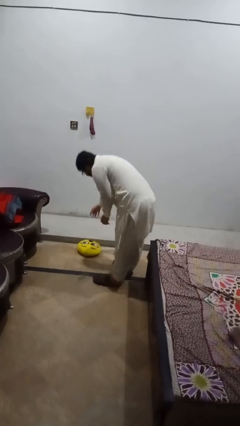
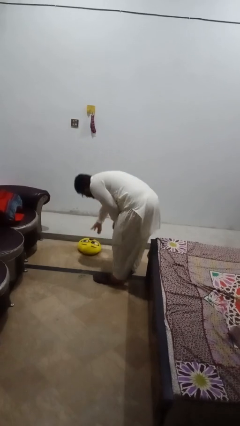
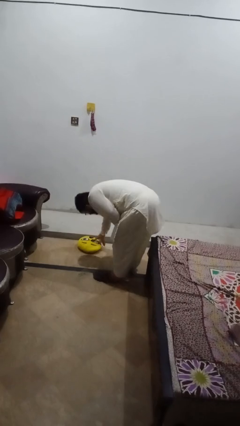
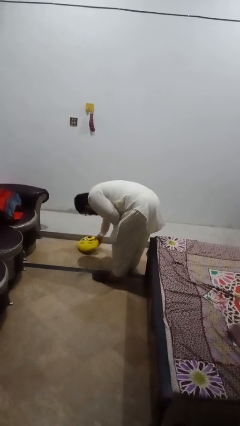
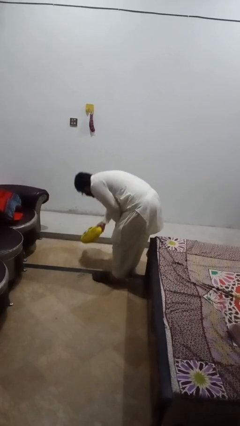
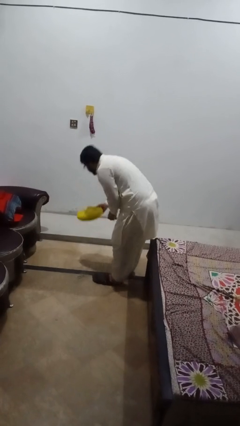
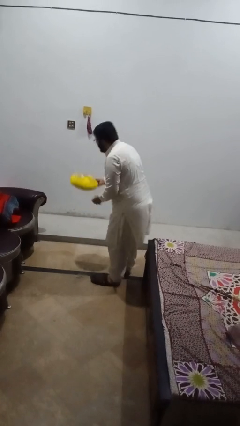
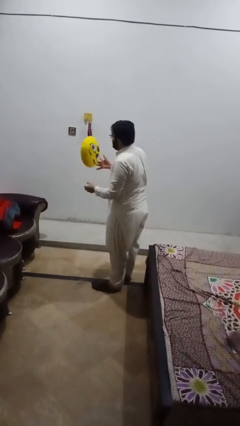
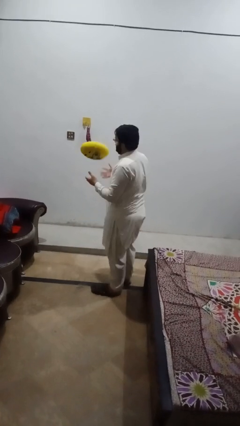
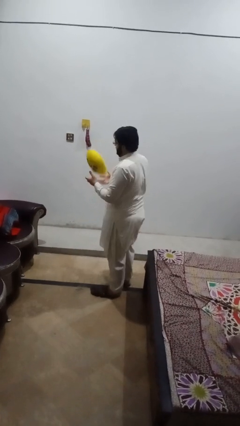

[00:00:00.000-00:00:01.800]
person picks up object from floor

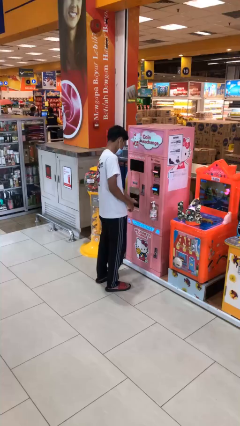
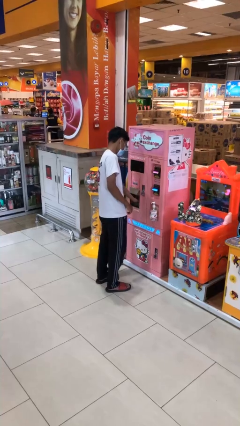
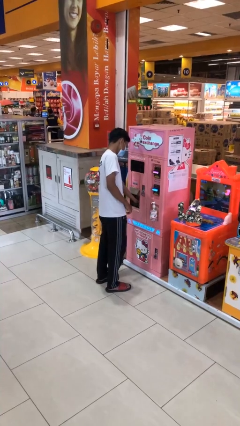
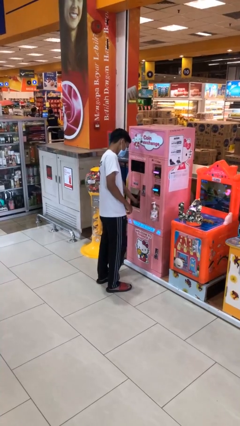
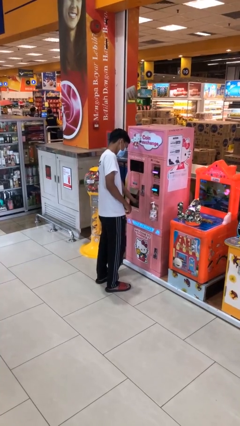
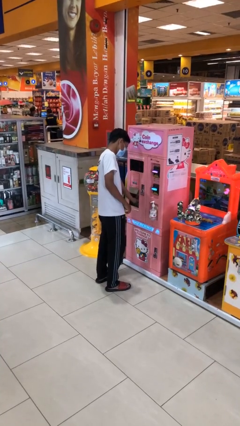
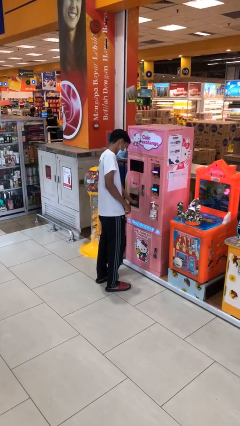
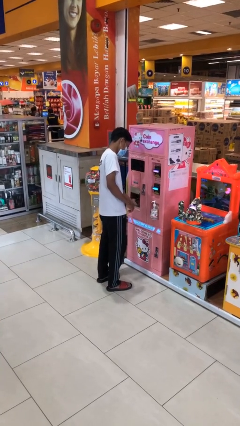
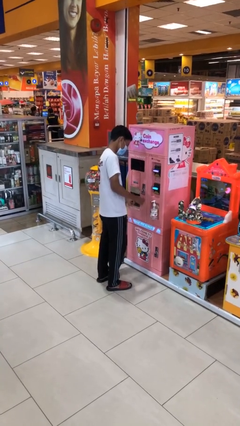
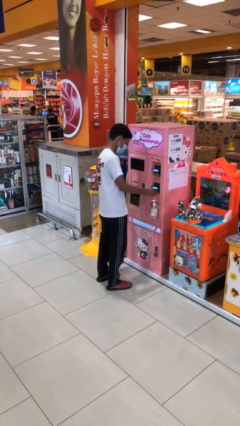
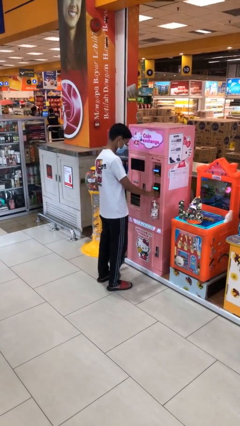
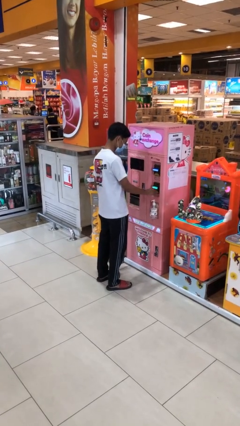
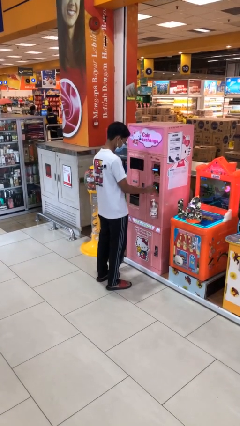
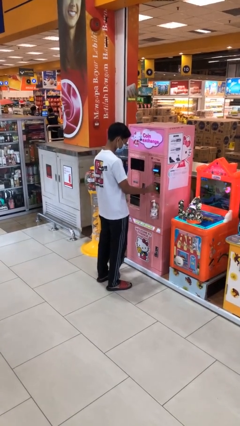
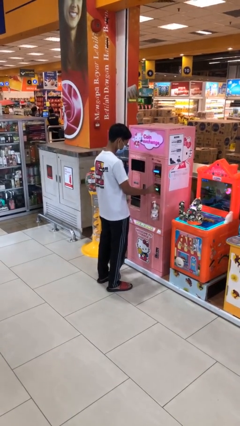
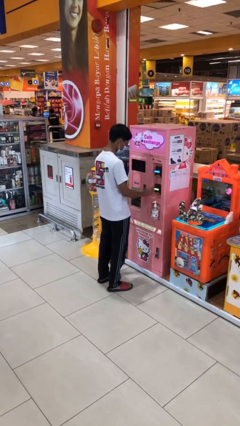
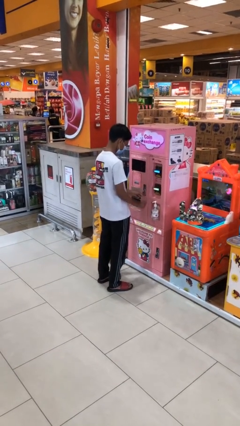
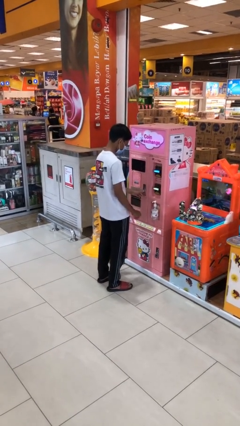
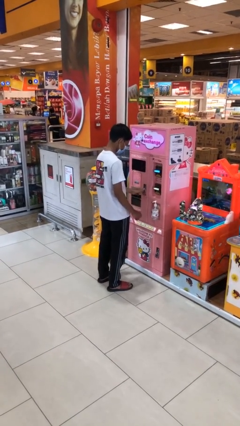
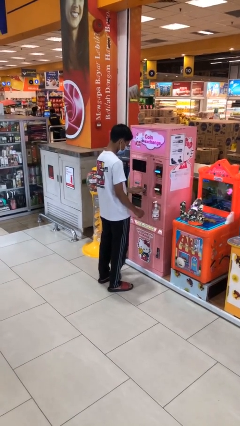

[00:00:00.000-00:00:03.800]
person purchases from machine

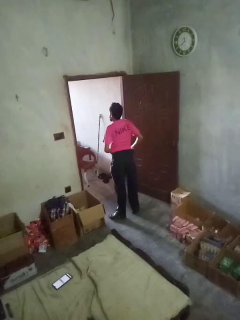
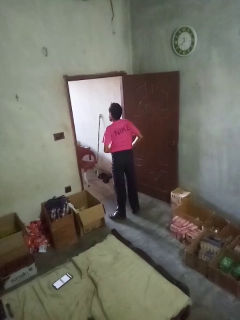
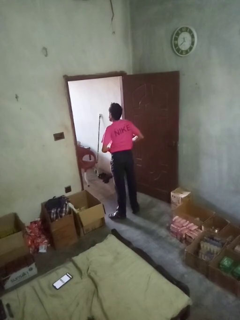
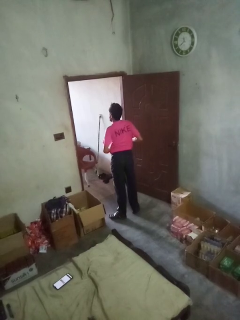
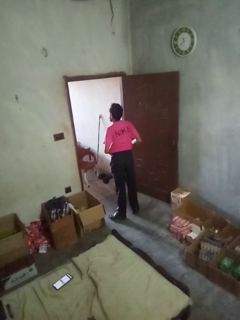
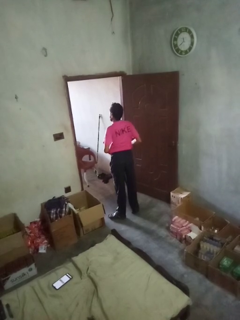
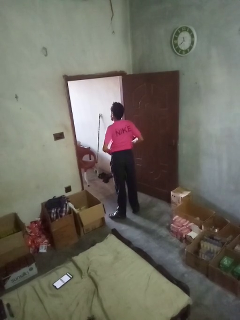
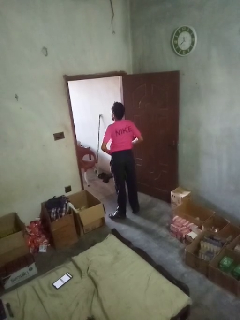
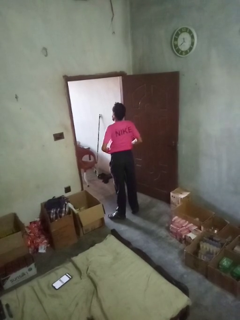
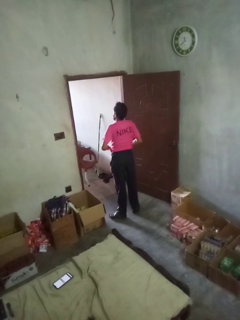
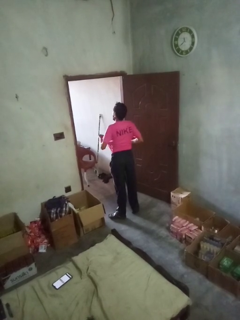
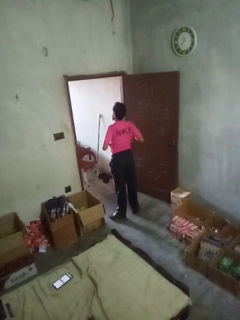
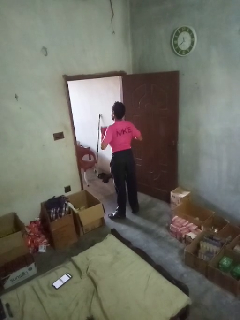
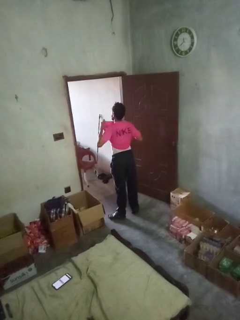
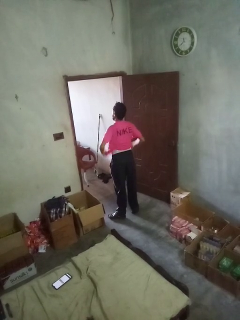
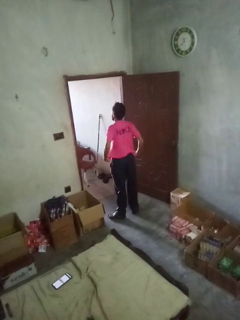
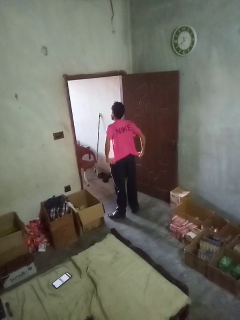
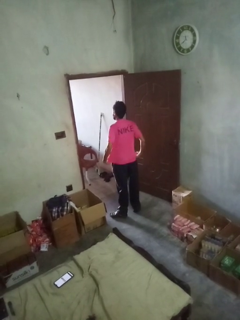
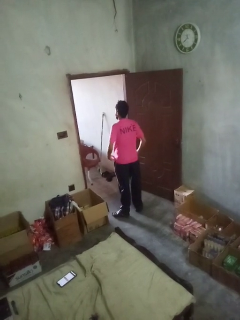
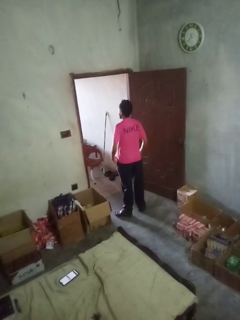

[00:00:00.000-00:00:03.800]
person untucks shirt

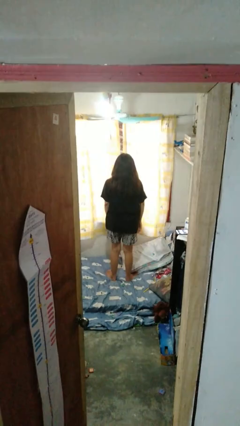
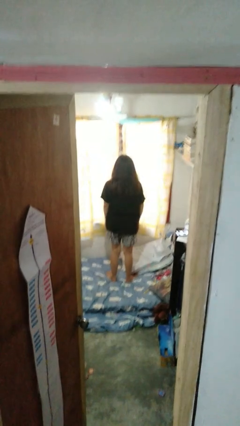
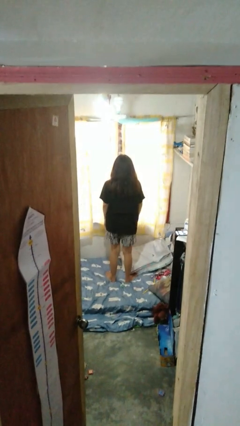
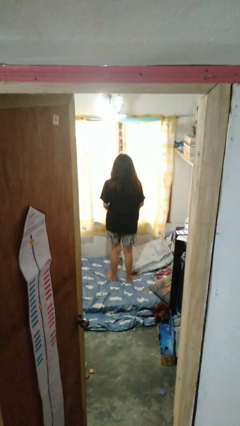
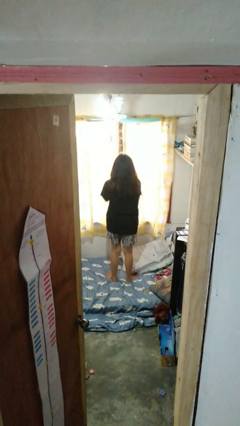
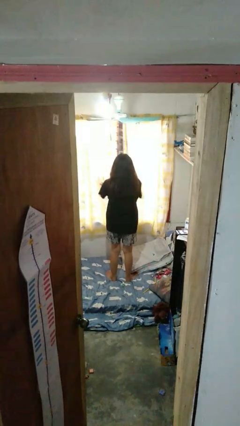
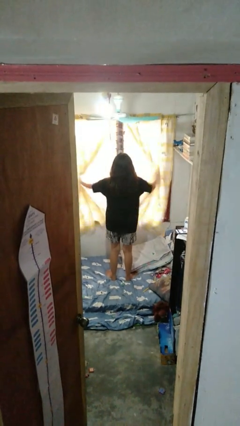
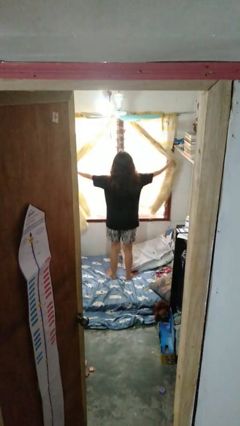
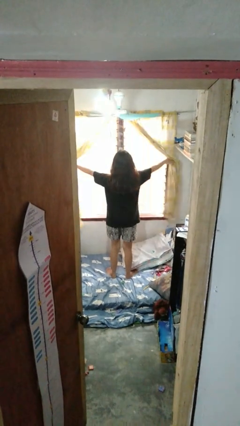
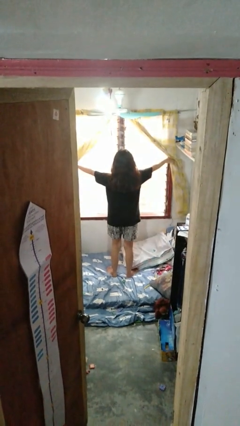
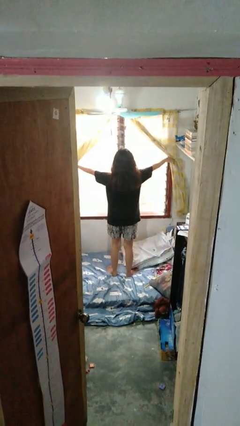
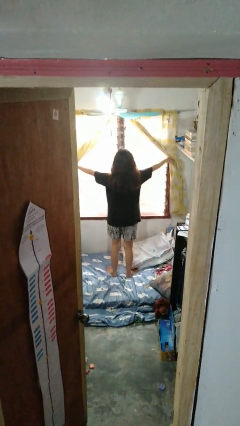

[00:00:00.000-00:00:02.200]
person opens curtains

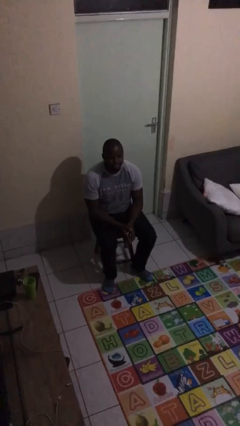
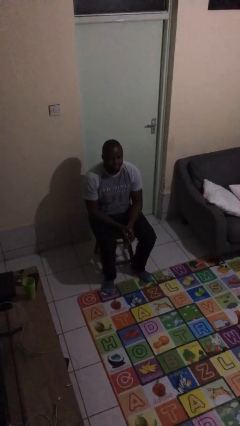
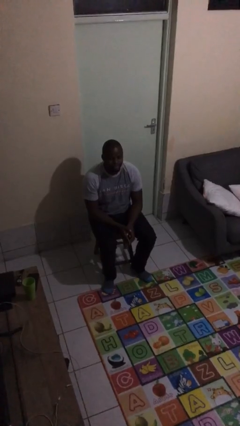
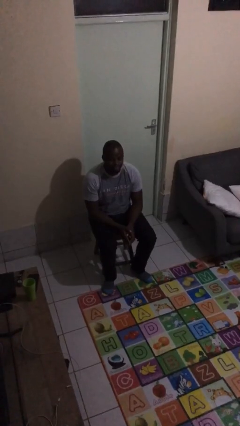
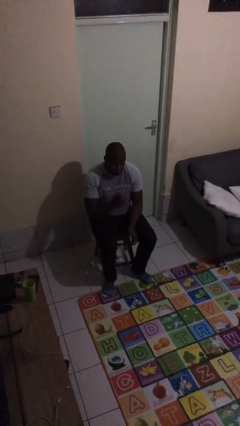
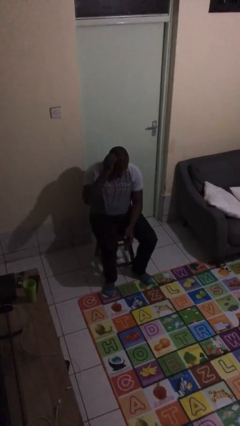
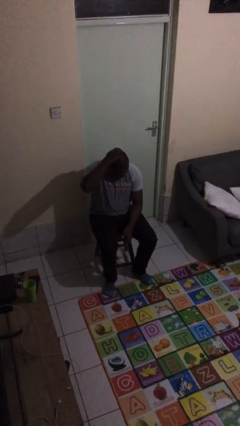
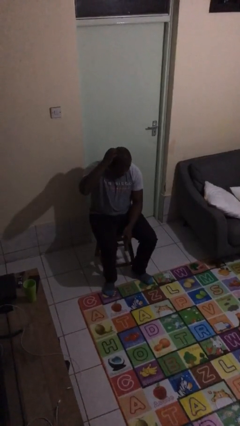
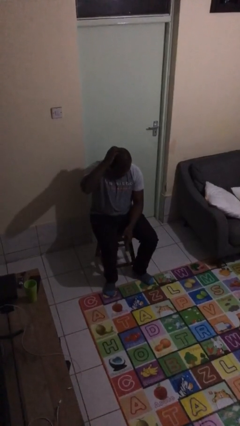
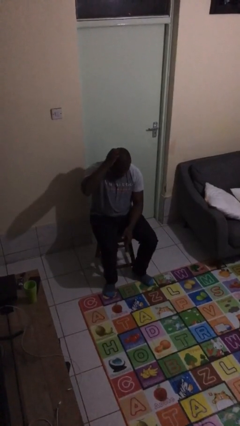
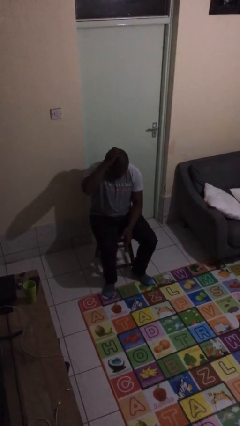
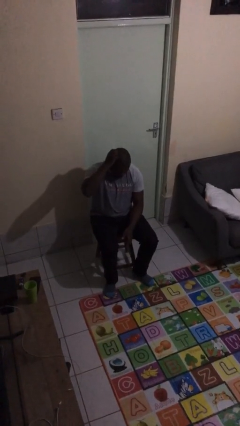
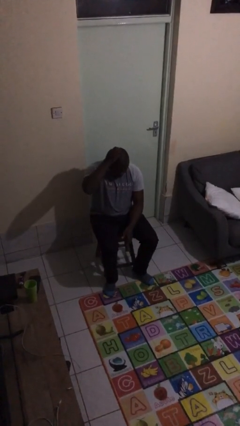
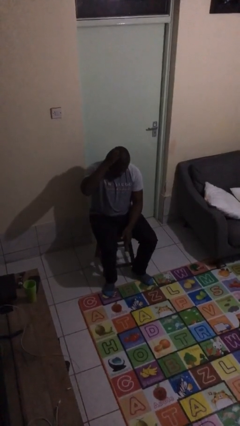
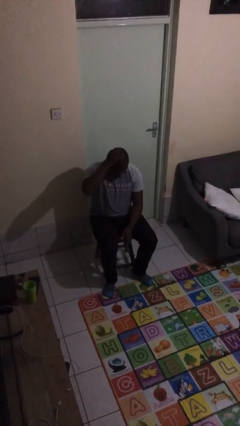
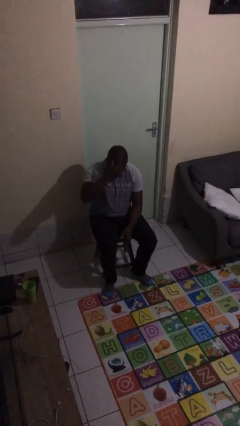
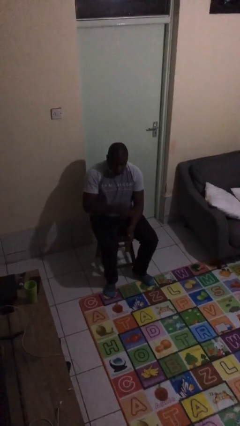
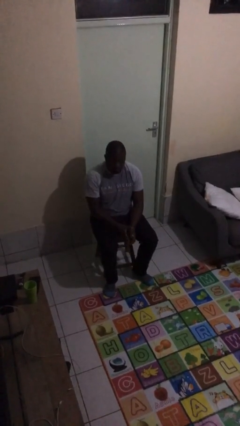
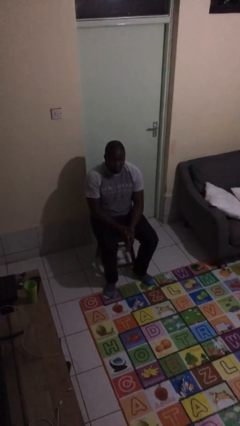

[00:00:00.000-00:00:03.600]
person scratches face

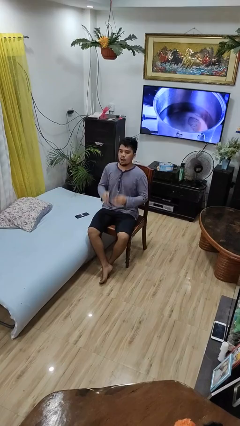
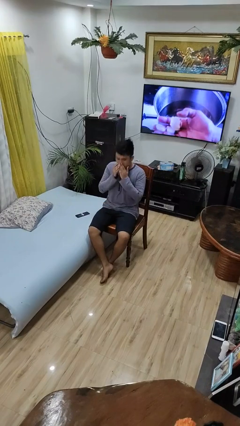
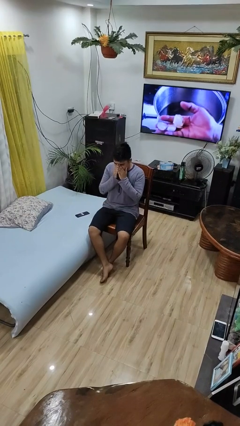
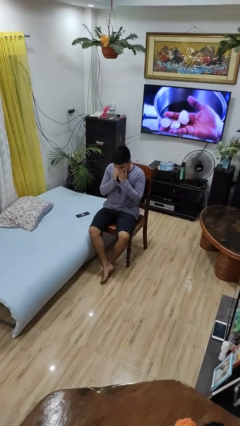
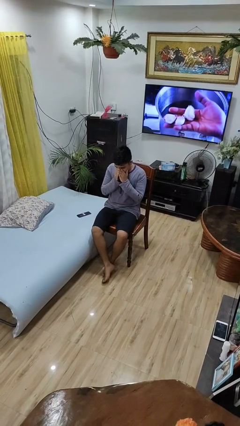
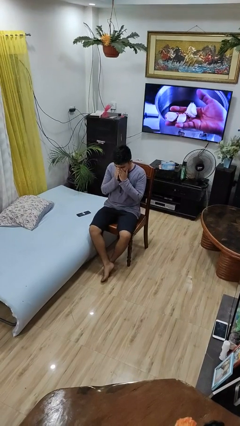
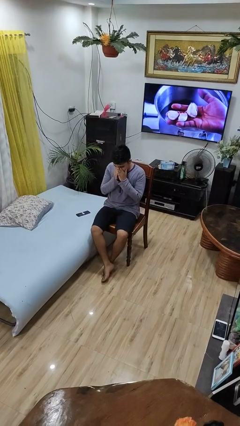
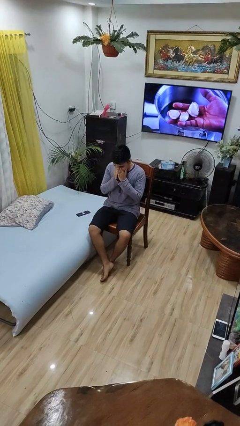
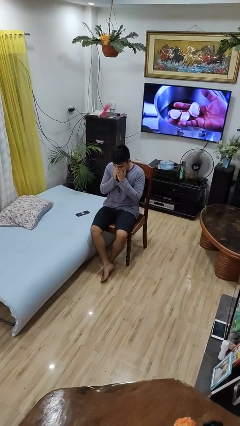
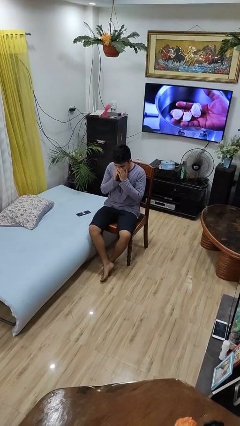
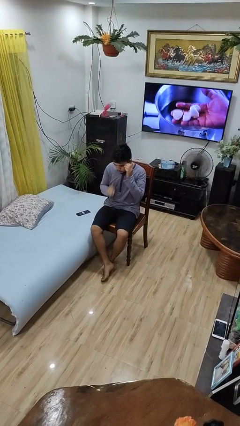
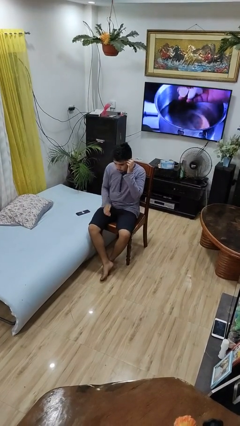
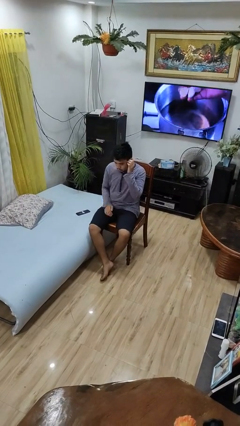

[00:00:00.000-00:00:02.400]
person sneezes into hand

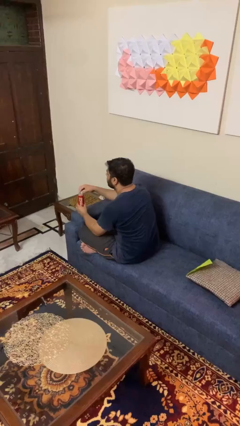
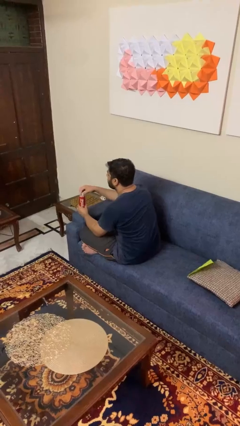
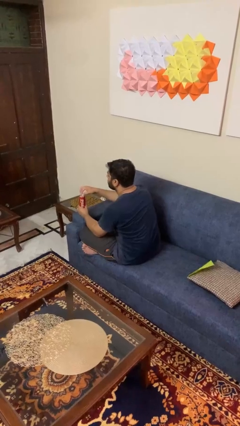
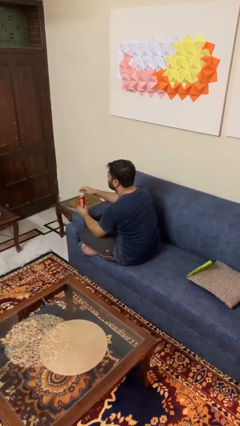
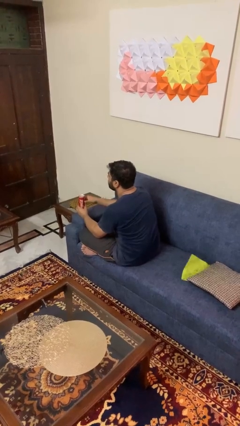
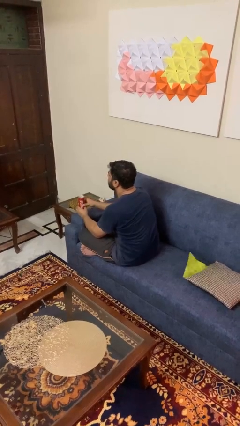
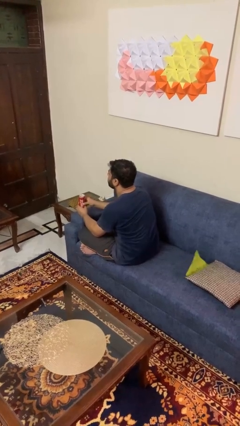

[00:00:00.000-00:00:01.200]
person opens beverage can
